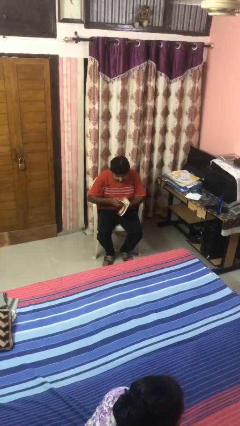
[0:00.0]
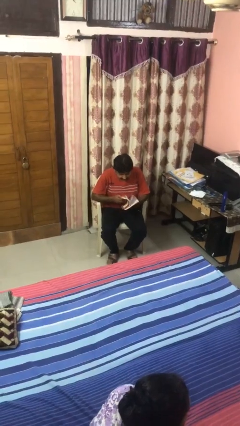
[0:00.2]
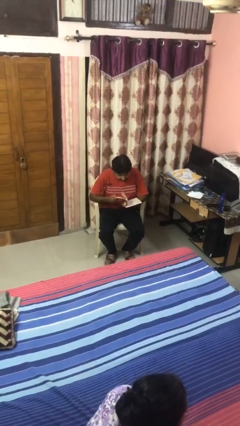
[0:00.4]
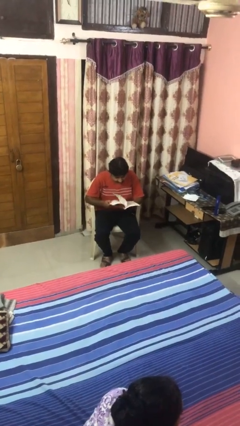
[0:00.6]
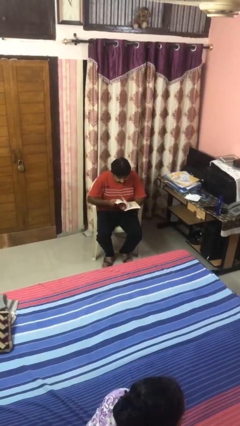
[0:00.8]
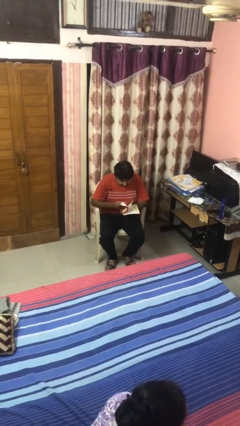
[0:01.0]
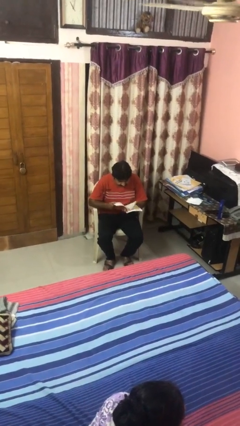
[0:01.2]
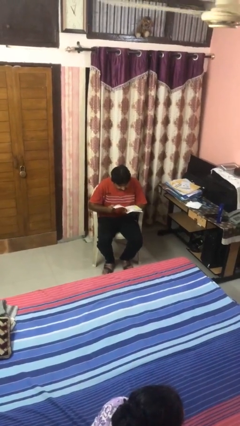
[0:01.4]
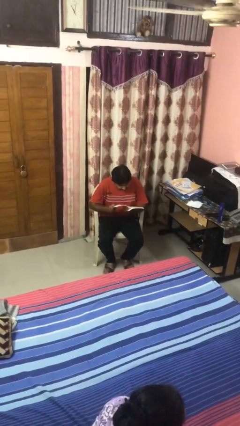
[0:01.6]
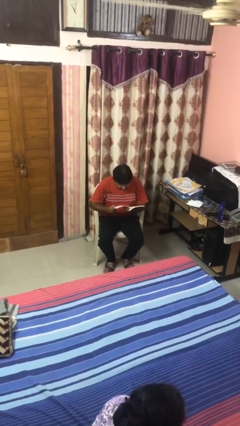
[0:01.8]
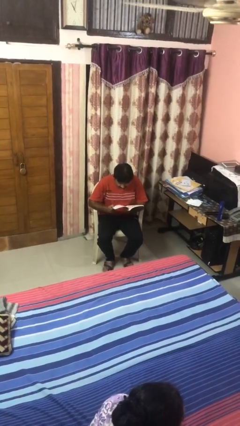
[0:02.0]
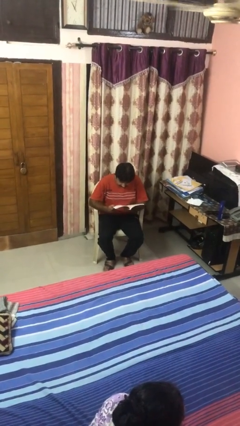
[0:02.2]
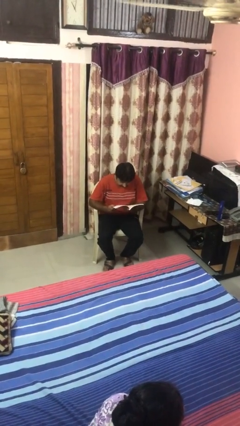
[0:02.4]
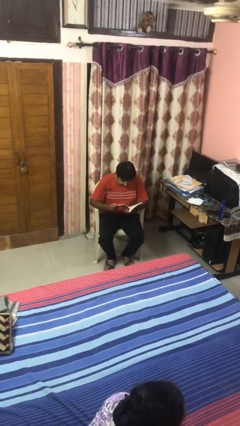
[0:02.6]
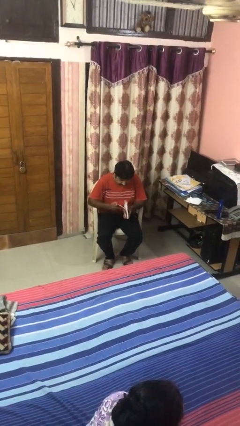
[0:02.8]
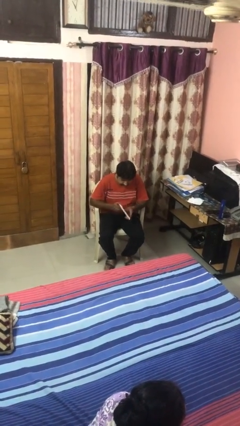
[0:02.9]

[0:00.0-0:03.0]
person reads book

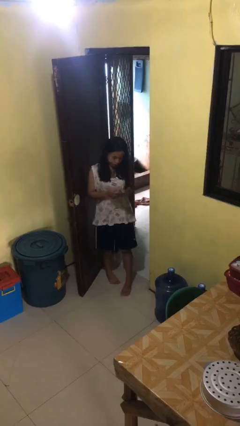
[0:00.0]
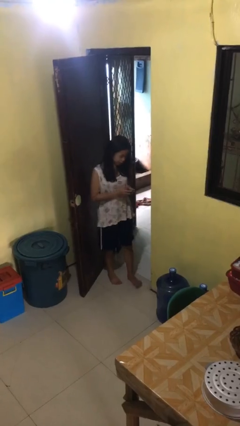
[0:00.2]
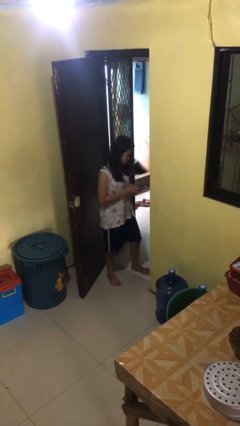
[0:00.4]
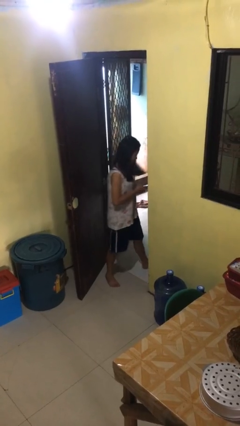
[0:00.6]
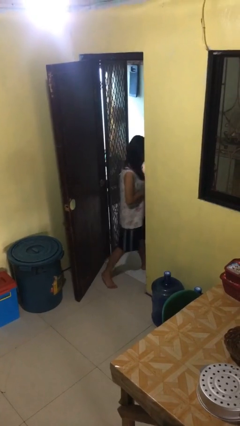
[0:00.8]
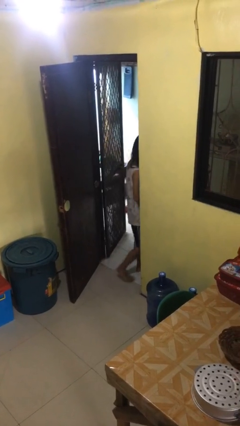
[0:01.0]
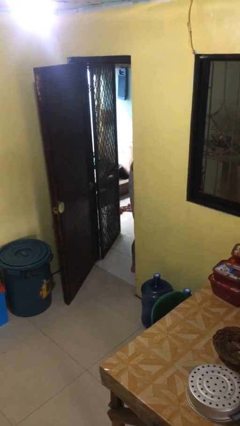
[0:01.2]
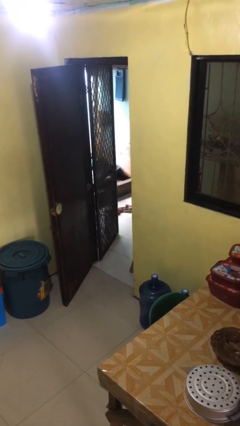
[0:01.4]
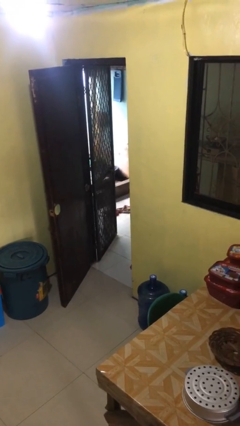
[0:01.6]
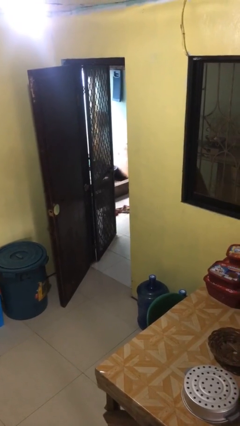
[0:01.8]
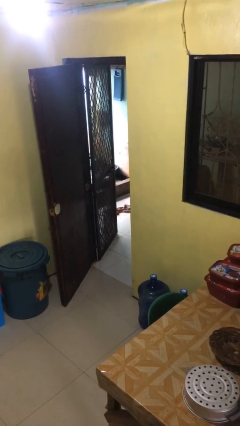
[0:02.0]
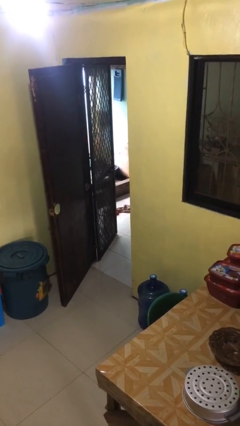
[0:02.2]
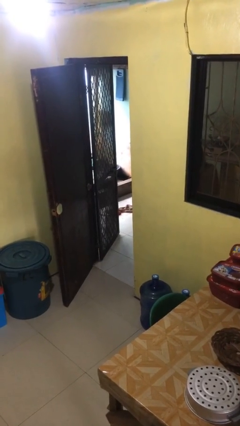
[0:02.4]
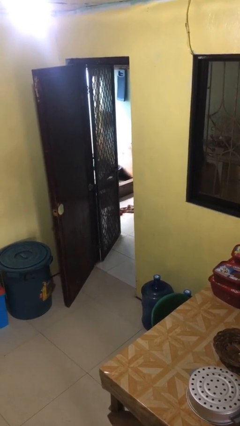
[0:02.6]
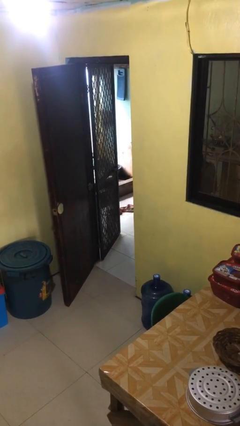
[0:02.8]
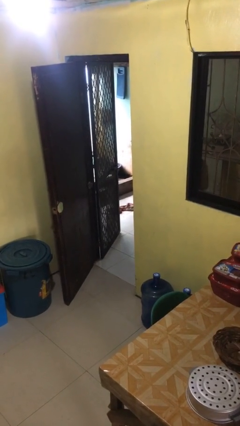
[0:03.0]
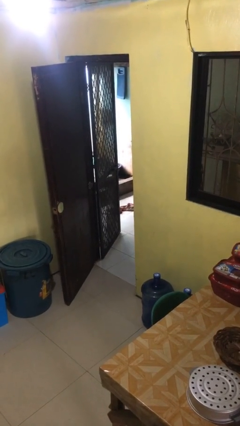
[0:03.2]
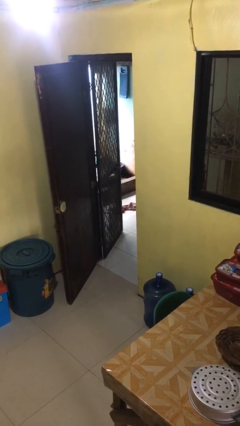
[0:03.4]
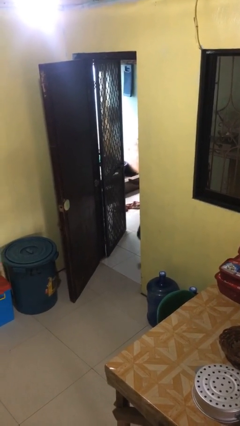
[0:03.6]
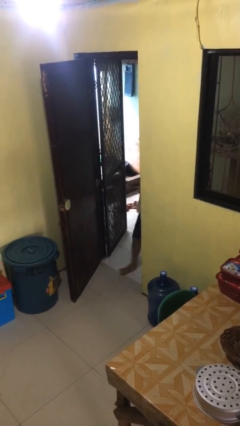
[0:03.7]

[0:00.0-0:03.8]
person exits scene through structure

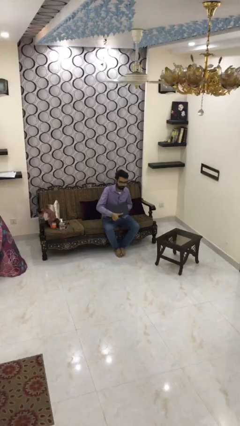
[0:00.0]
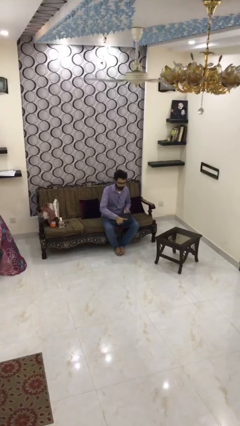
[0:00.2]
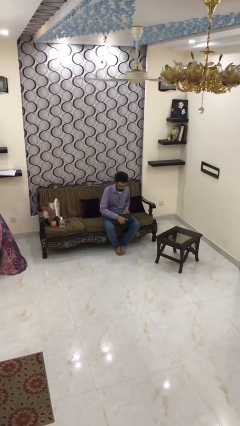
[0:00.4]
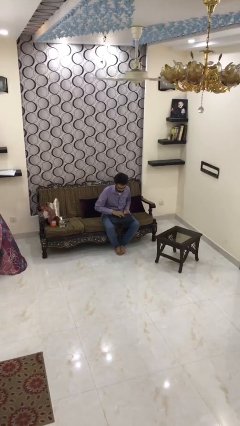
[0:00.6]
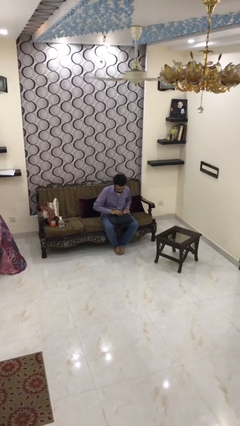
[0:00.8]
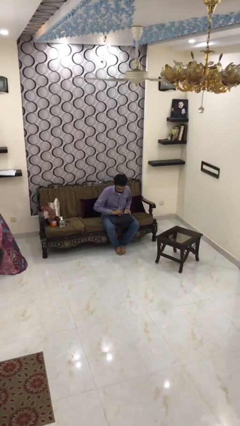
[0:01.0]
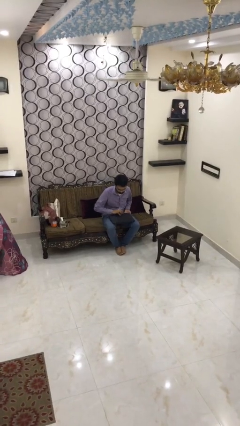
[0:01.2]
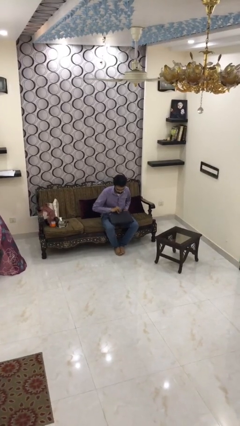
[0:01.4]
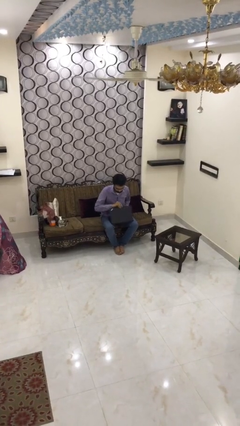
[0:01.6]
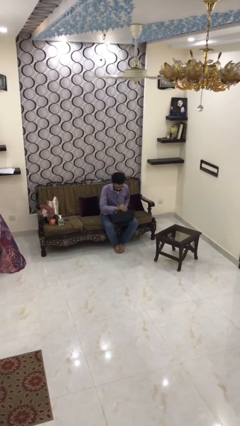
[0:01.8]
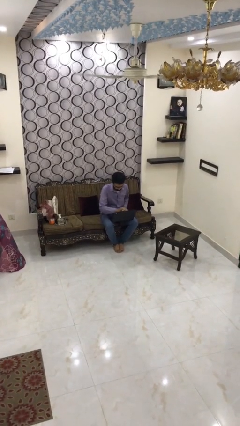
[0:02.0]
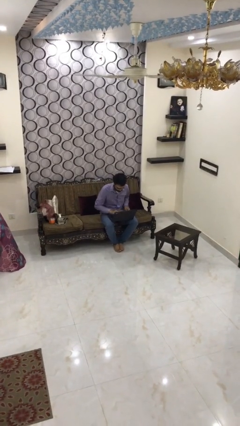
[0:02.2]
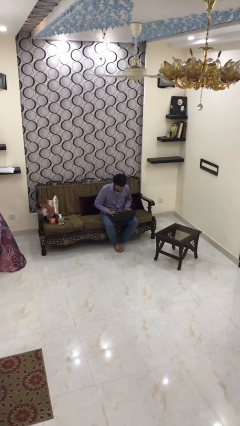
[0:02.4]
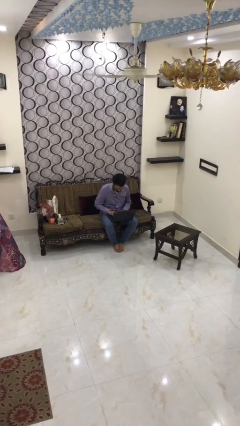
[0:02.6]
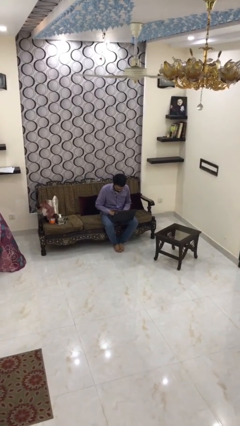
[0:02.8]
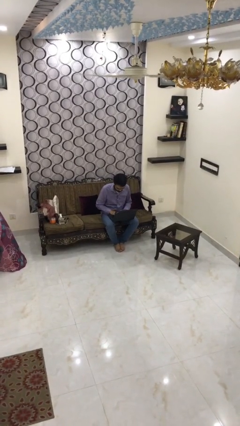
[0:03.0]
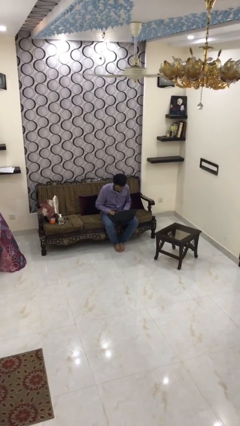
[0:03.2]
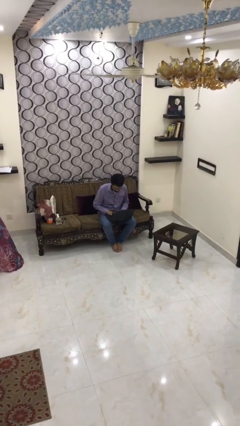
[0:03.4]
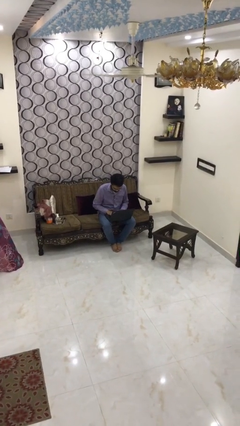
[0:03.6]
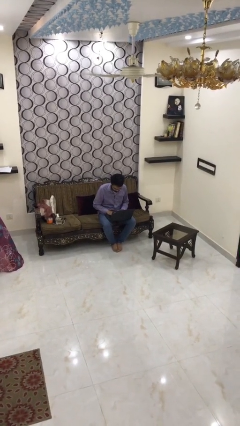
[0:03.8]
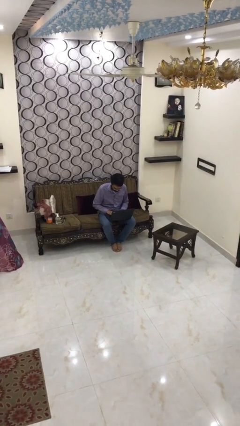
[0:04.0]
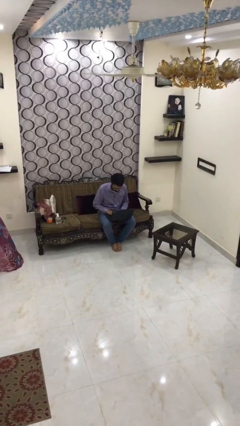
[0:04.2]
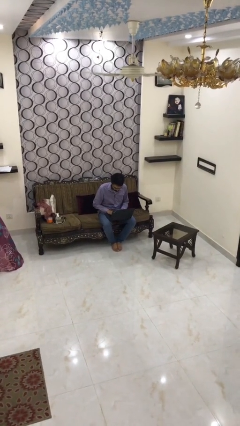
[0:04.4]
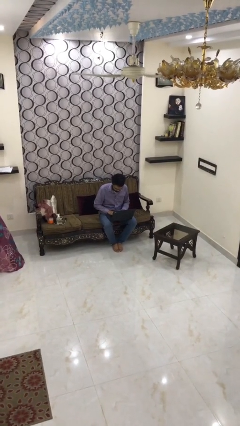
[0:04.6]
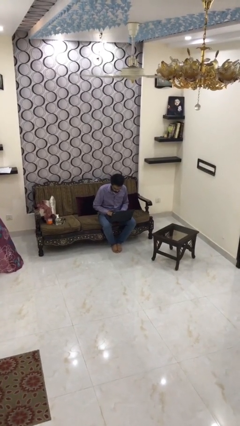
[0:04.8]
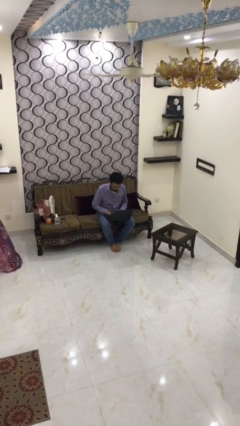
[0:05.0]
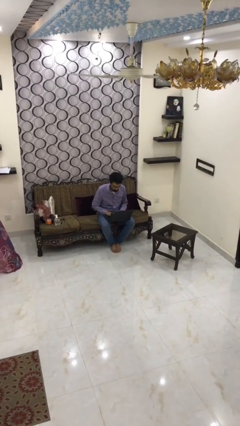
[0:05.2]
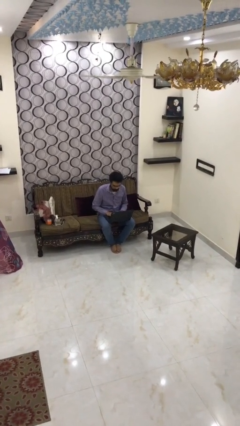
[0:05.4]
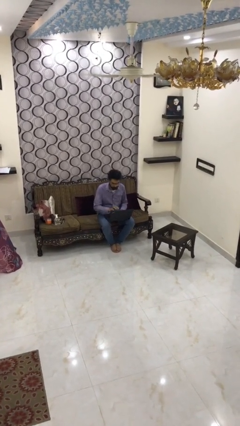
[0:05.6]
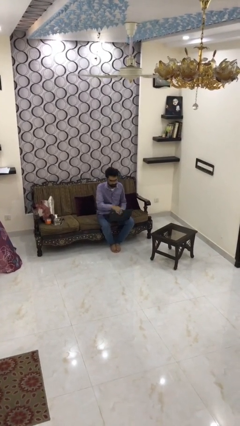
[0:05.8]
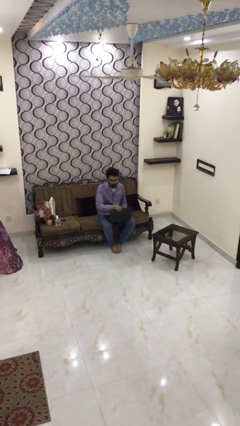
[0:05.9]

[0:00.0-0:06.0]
person interacts with laptop

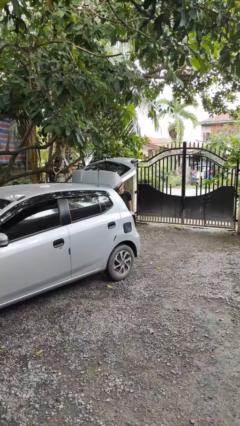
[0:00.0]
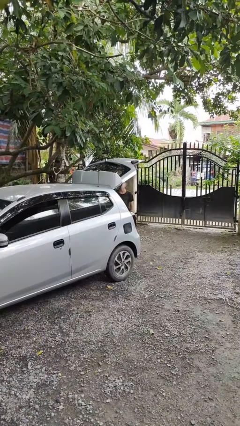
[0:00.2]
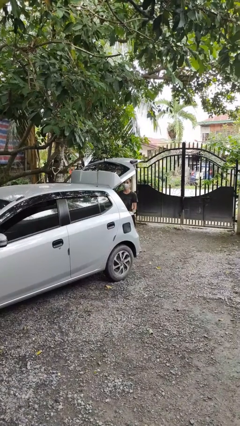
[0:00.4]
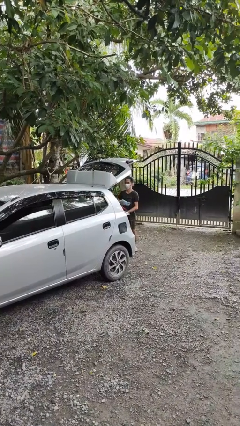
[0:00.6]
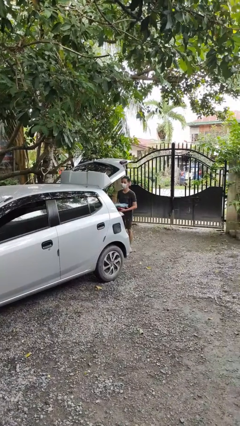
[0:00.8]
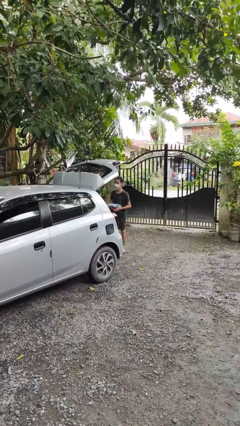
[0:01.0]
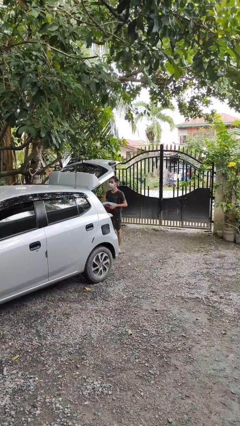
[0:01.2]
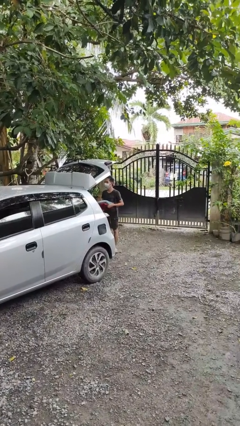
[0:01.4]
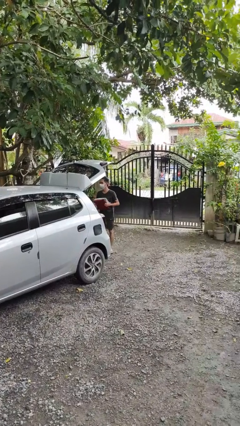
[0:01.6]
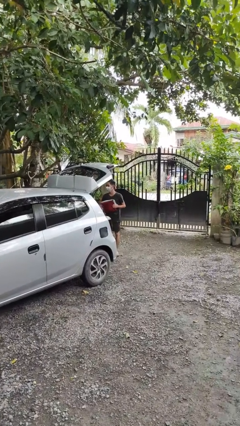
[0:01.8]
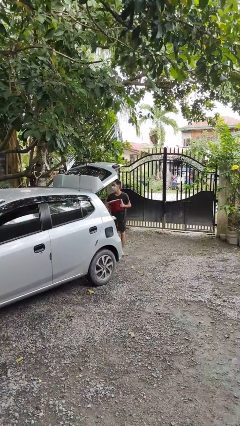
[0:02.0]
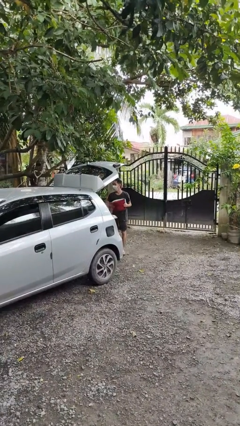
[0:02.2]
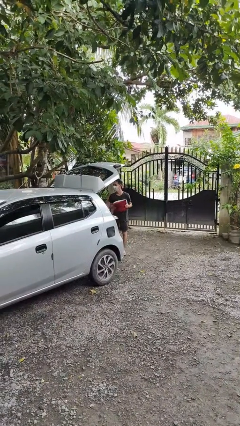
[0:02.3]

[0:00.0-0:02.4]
person unloads car

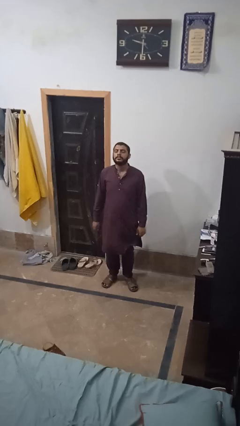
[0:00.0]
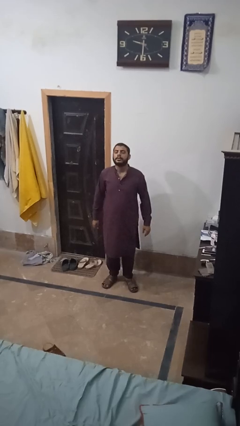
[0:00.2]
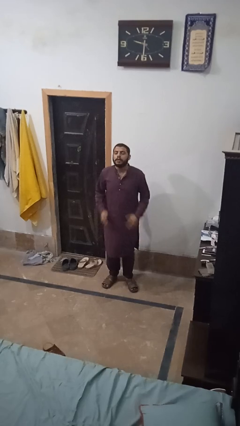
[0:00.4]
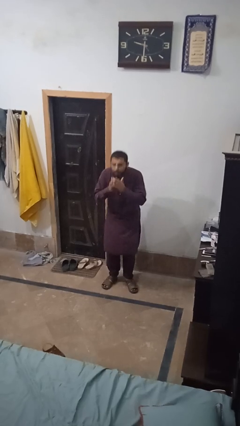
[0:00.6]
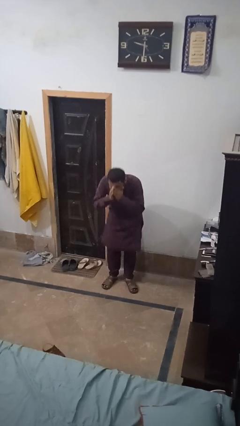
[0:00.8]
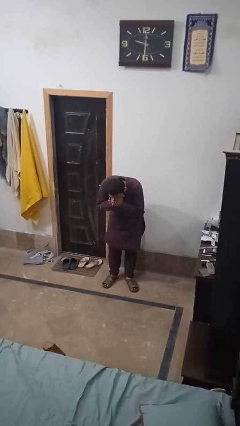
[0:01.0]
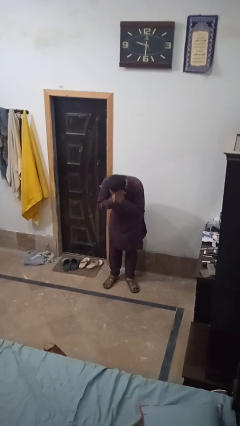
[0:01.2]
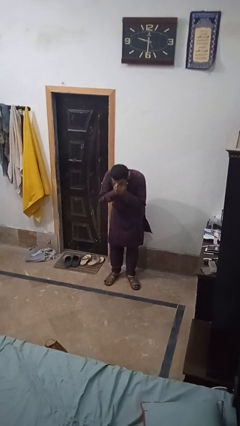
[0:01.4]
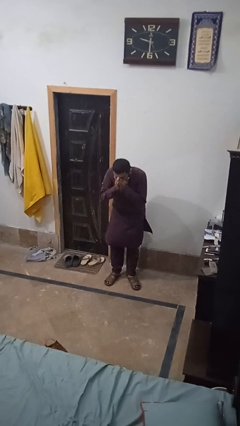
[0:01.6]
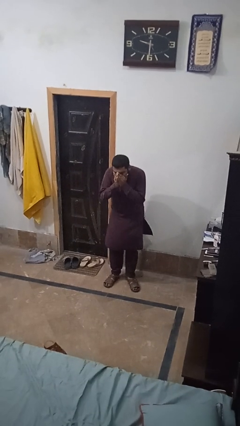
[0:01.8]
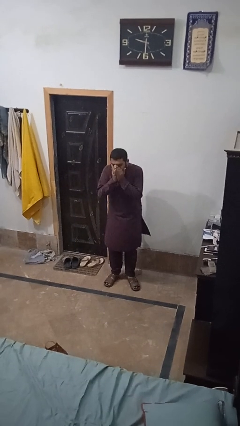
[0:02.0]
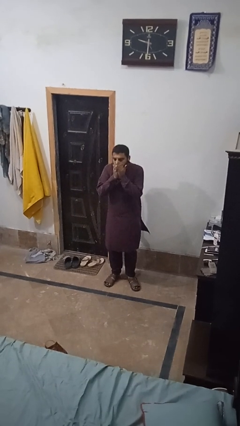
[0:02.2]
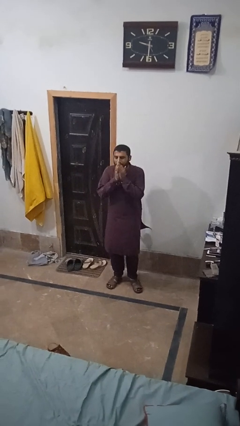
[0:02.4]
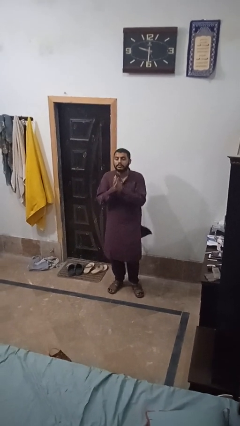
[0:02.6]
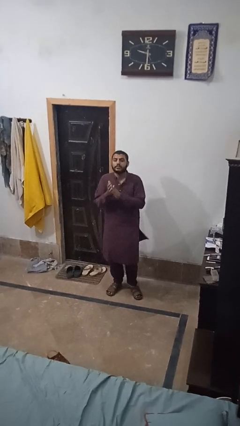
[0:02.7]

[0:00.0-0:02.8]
person sneezes into hand
